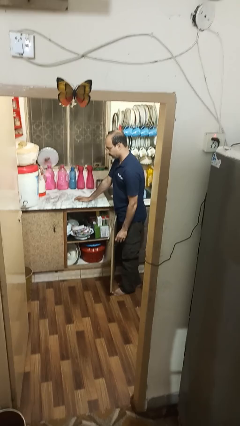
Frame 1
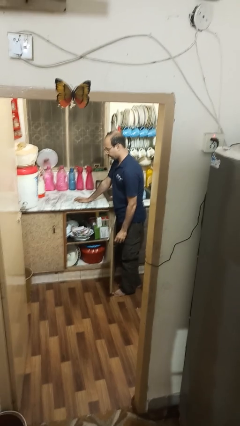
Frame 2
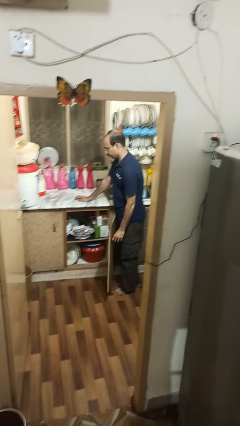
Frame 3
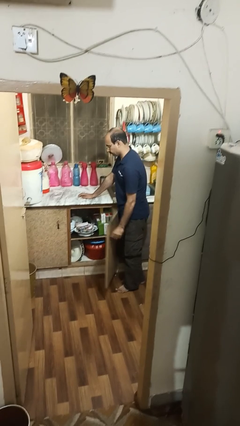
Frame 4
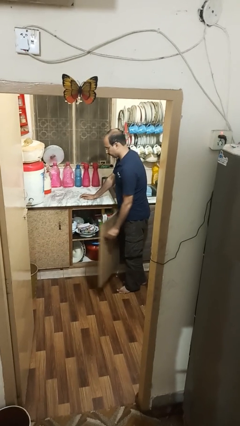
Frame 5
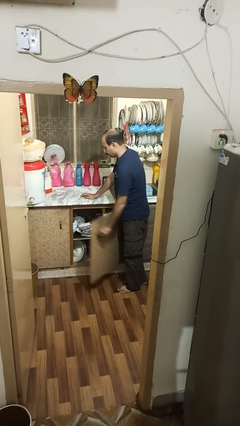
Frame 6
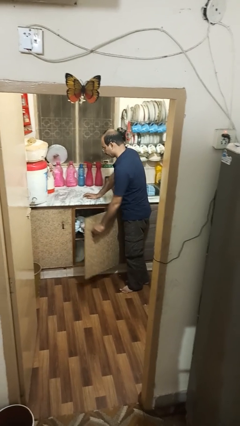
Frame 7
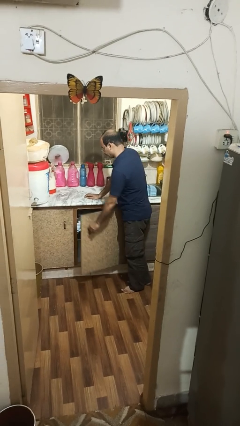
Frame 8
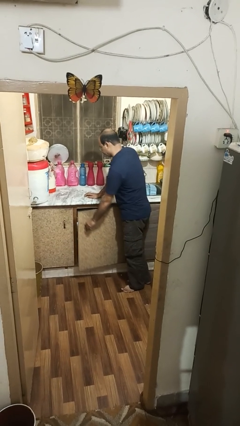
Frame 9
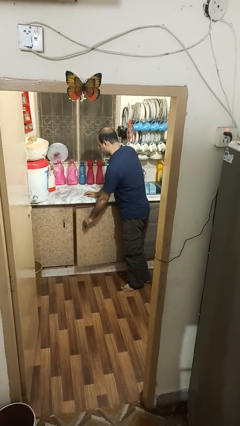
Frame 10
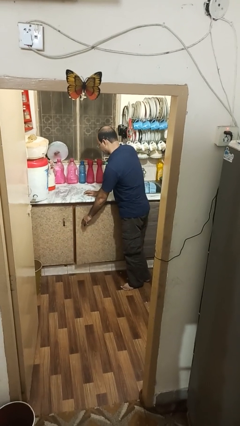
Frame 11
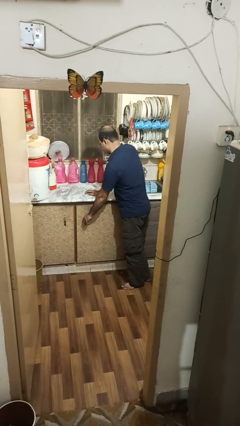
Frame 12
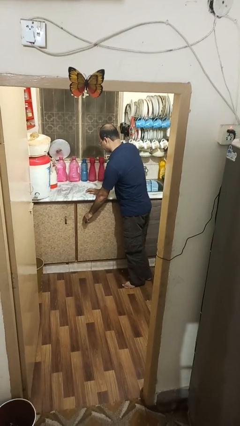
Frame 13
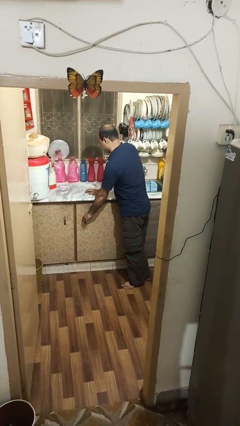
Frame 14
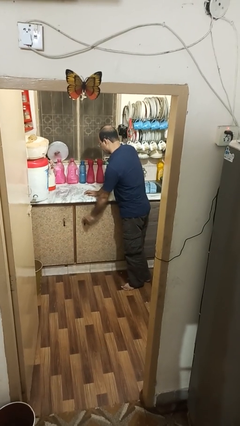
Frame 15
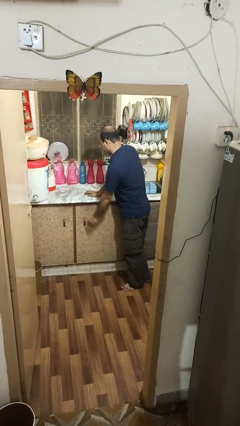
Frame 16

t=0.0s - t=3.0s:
person closes cabinet

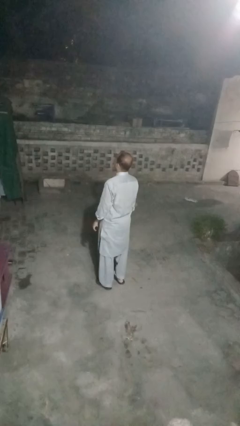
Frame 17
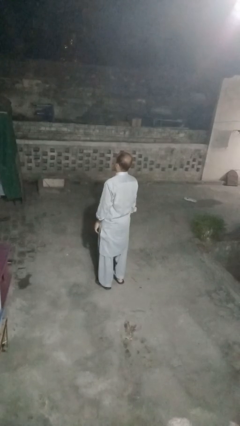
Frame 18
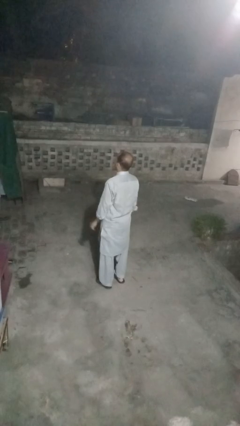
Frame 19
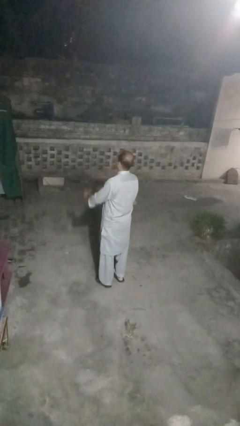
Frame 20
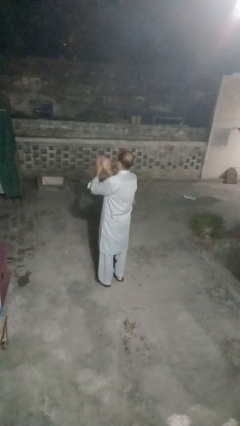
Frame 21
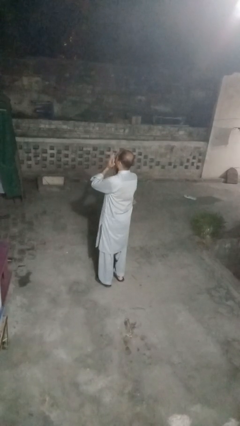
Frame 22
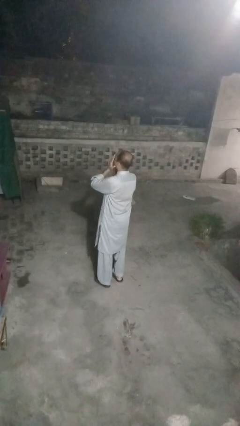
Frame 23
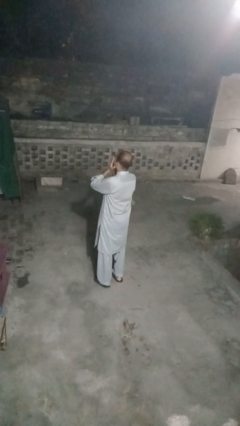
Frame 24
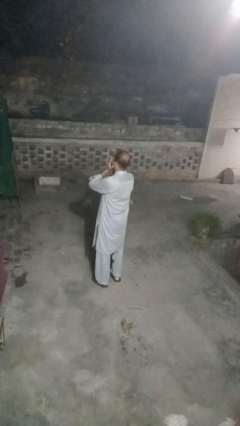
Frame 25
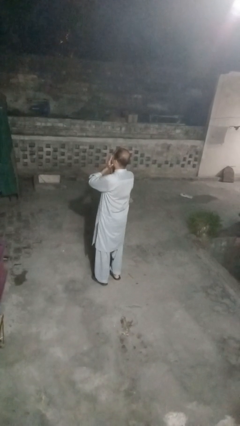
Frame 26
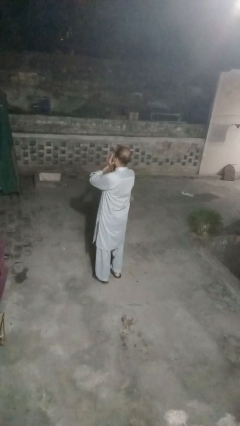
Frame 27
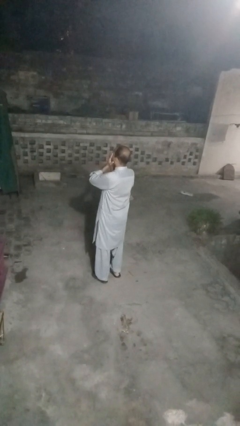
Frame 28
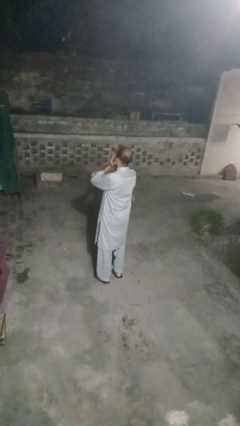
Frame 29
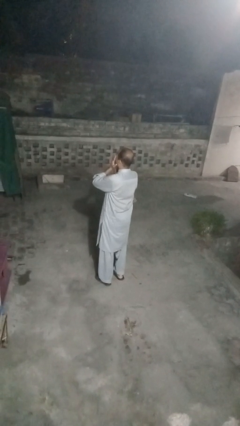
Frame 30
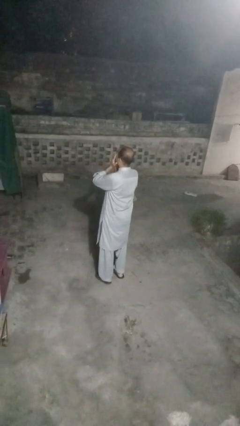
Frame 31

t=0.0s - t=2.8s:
person covers face with hands

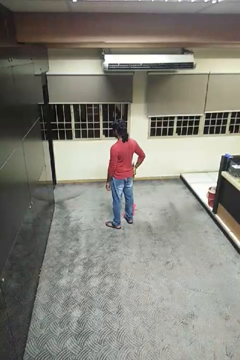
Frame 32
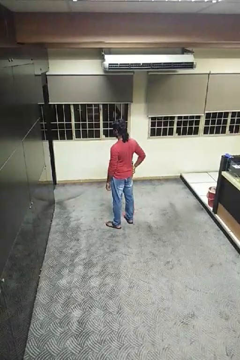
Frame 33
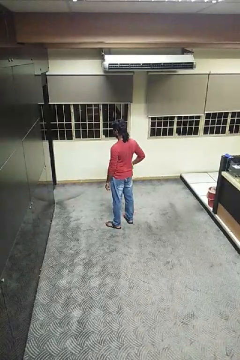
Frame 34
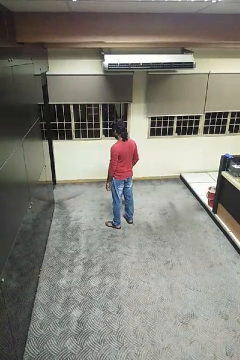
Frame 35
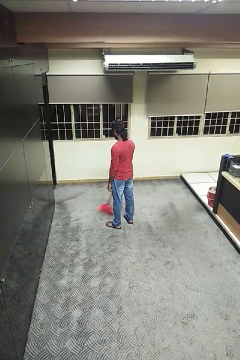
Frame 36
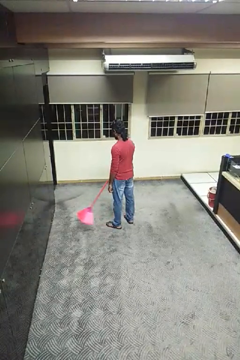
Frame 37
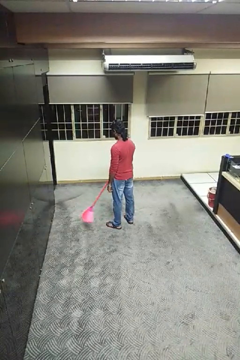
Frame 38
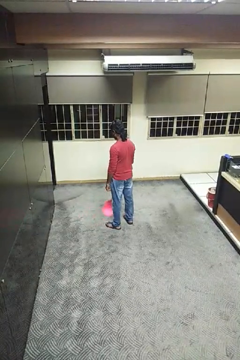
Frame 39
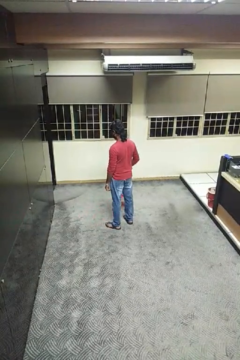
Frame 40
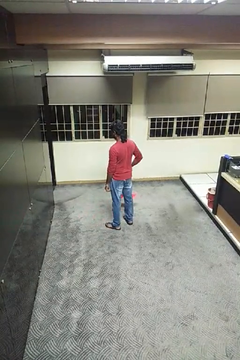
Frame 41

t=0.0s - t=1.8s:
person sweeps floor

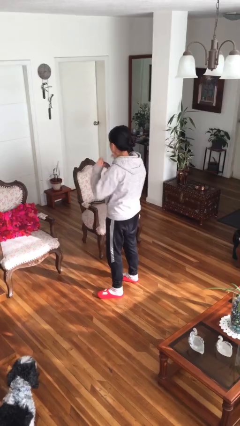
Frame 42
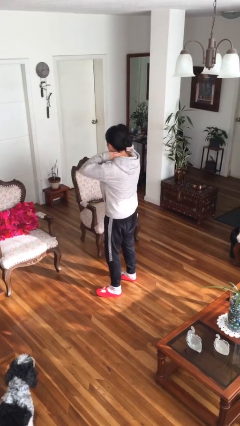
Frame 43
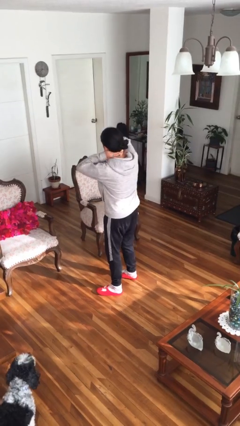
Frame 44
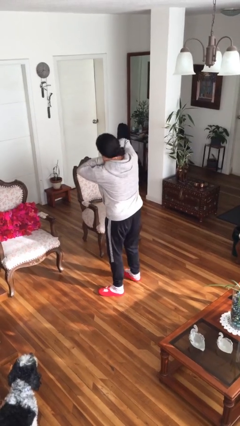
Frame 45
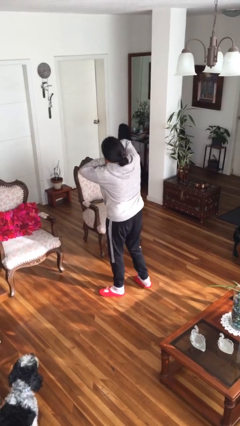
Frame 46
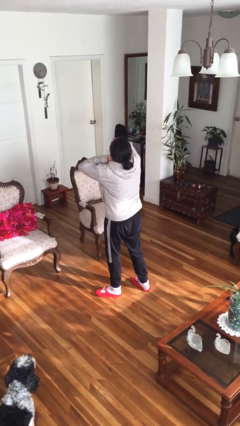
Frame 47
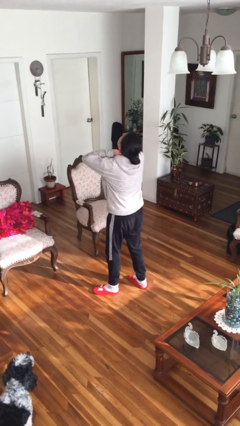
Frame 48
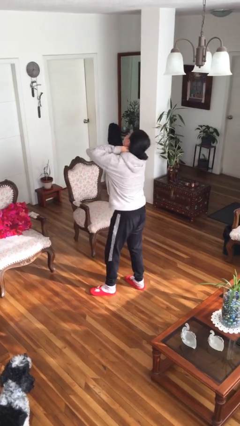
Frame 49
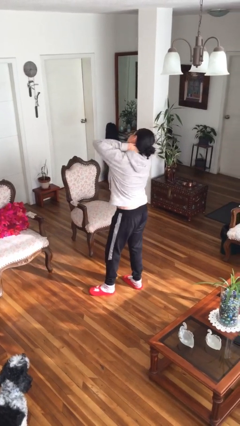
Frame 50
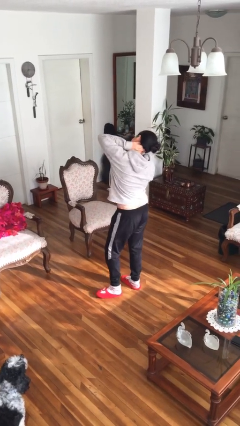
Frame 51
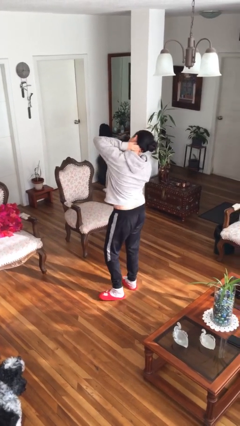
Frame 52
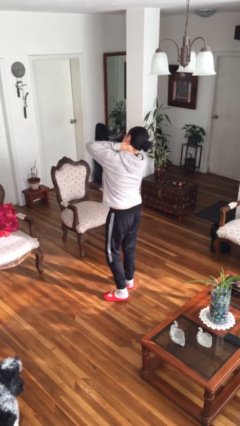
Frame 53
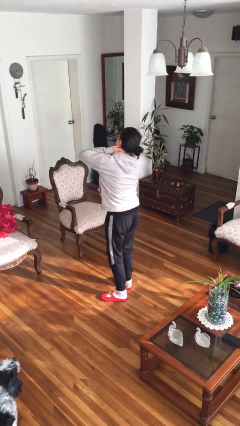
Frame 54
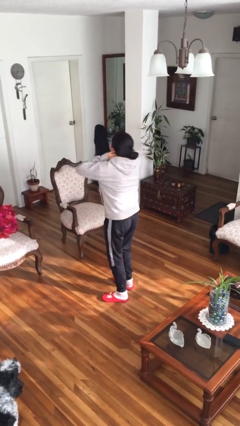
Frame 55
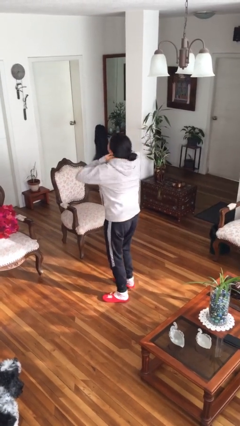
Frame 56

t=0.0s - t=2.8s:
person rubs neck

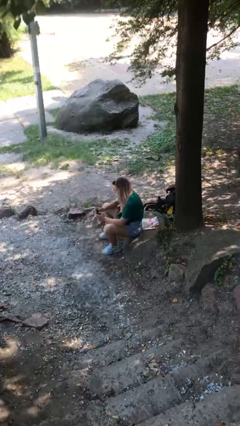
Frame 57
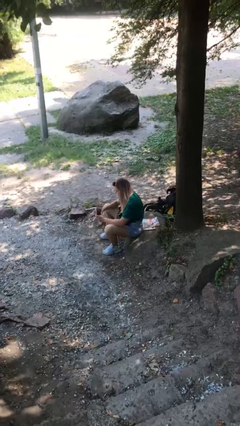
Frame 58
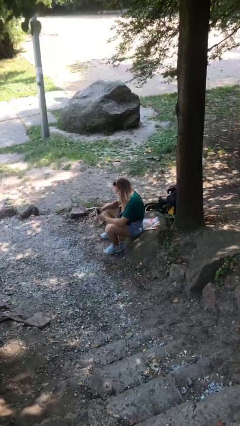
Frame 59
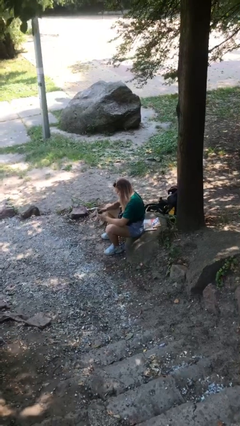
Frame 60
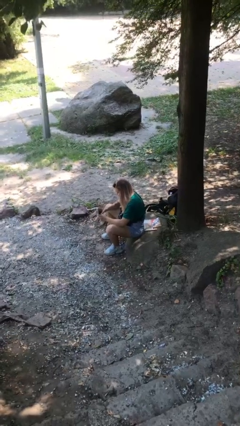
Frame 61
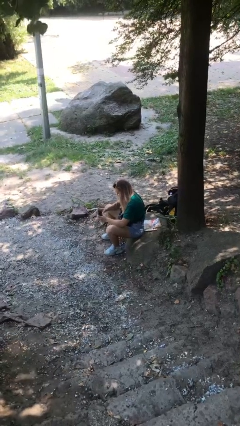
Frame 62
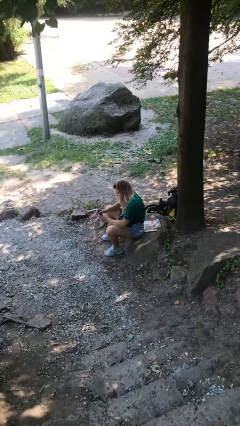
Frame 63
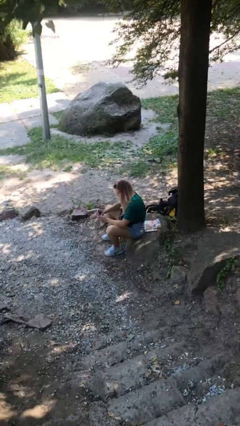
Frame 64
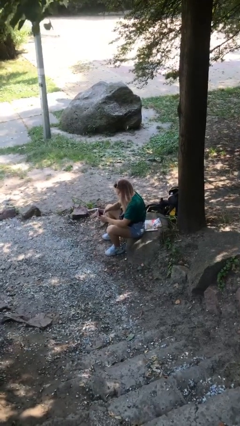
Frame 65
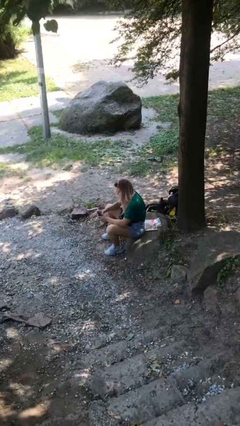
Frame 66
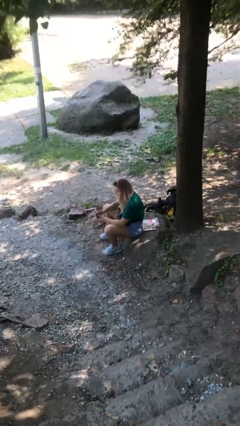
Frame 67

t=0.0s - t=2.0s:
person interacts with handheld game

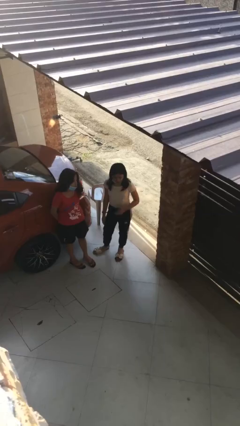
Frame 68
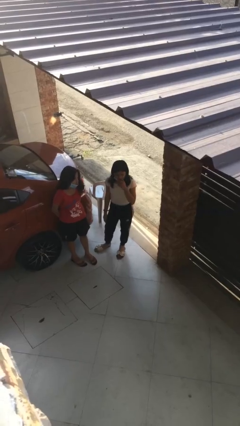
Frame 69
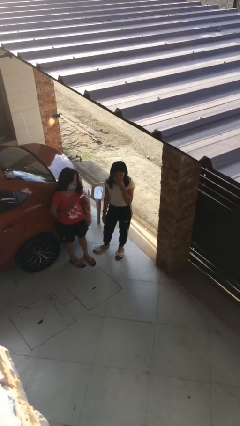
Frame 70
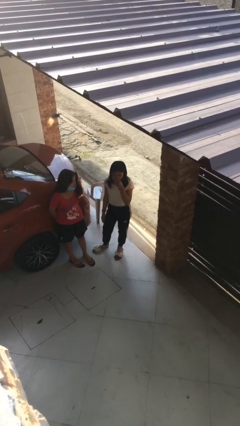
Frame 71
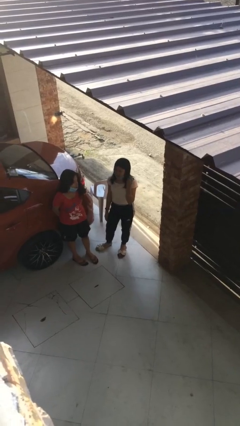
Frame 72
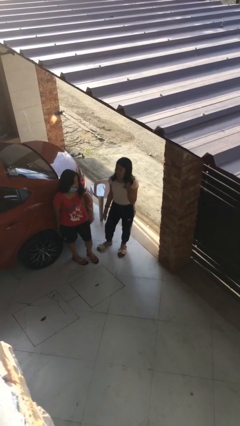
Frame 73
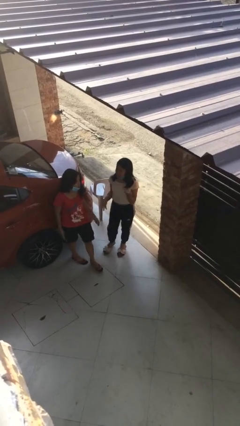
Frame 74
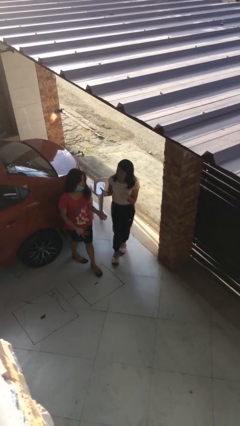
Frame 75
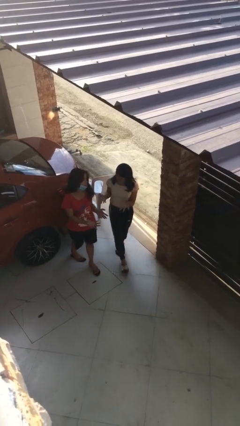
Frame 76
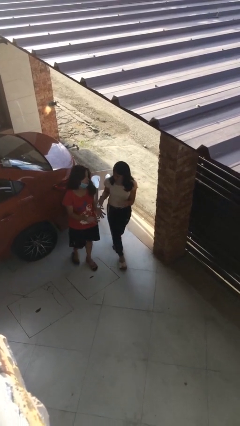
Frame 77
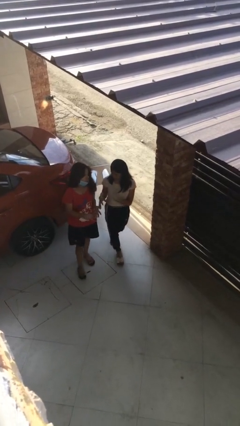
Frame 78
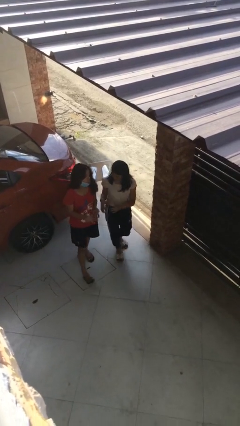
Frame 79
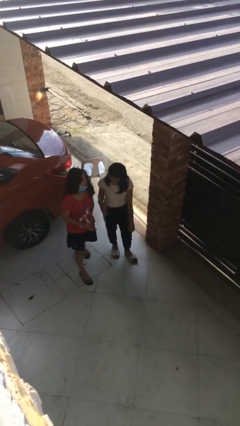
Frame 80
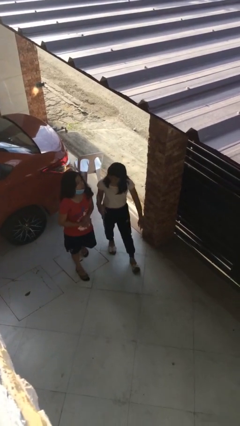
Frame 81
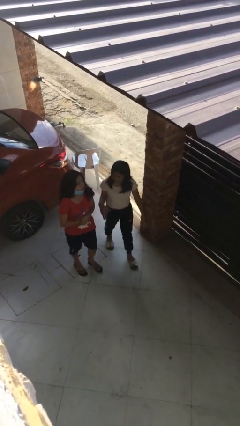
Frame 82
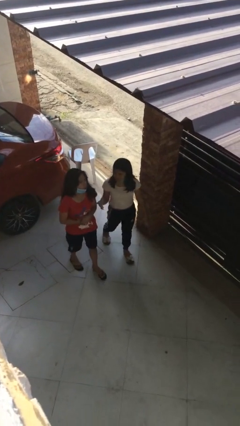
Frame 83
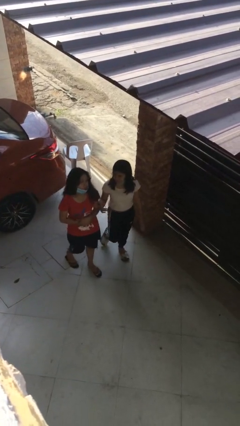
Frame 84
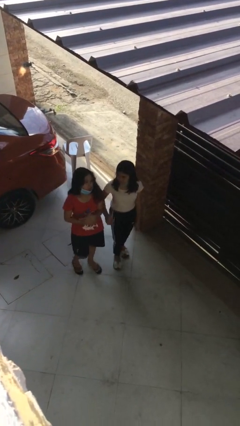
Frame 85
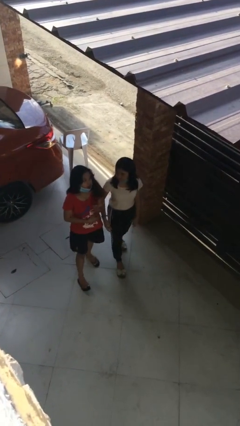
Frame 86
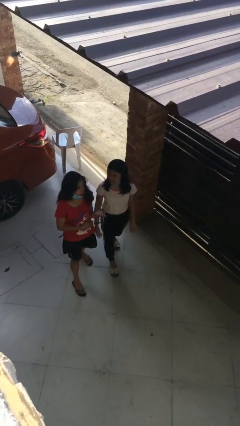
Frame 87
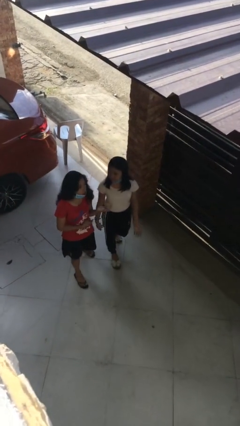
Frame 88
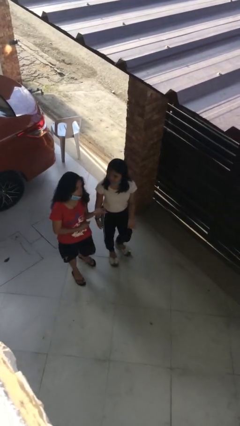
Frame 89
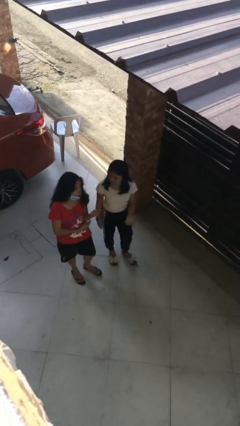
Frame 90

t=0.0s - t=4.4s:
person talks to person

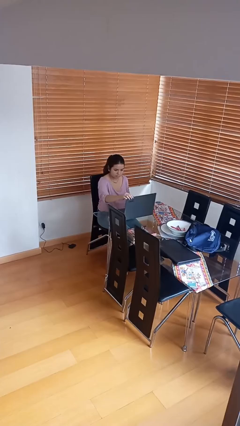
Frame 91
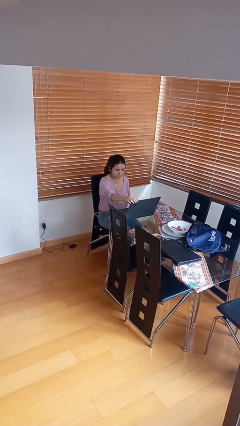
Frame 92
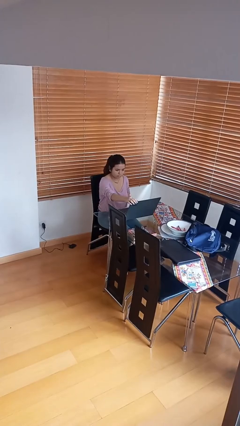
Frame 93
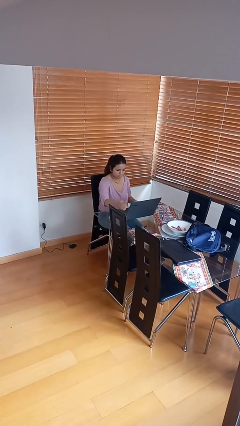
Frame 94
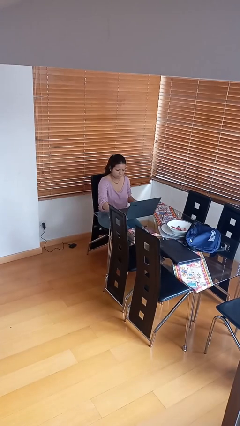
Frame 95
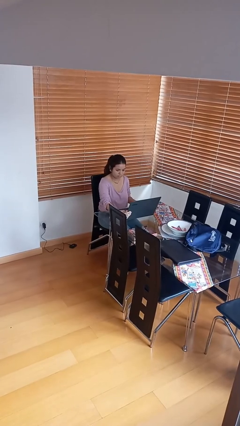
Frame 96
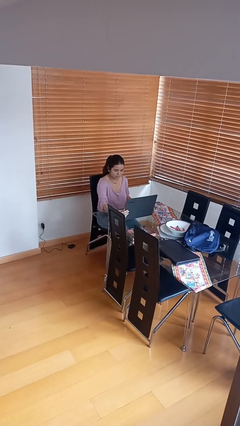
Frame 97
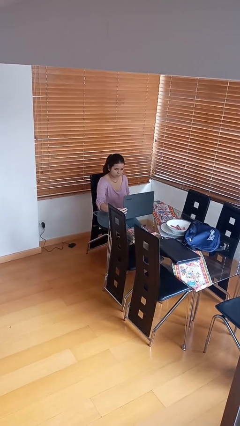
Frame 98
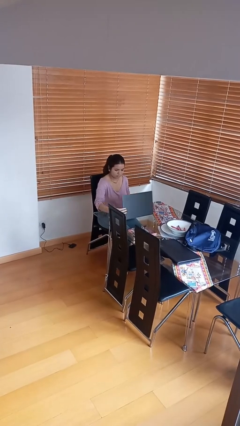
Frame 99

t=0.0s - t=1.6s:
person interacts with laptop
